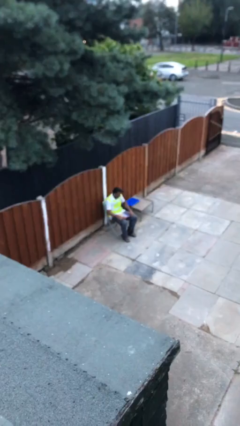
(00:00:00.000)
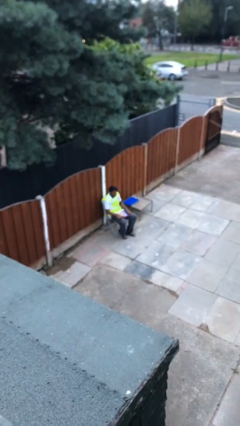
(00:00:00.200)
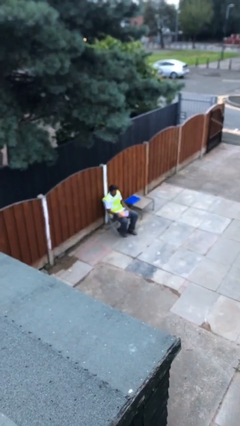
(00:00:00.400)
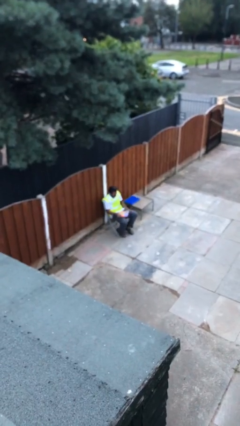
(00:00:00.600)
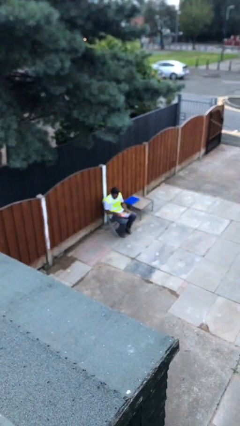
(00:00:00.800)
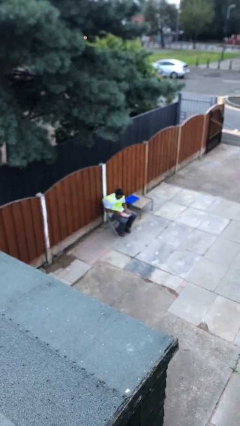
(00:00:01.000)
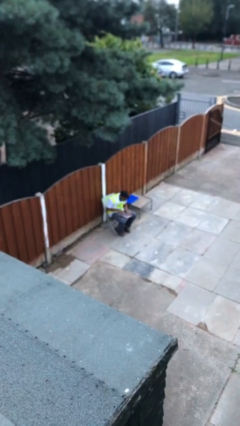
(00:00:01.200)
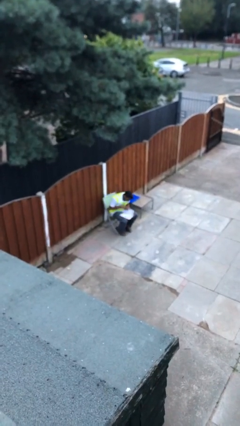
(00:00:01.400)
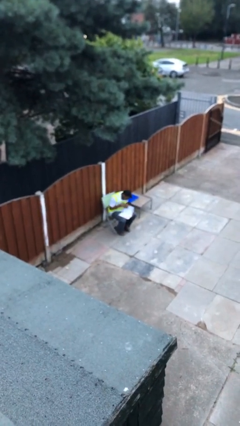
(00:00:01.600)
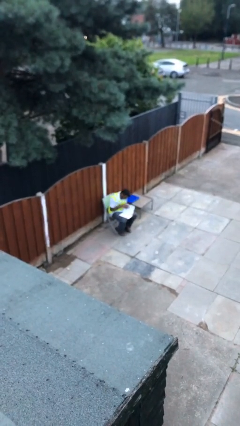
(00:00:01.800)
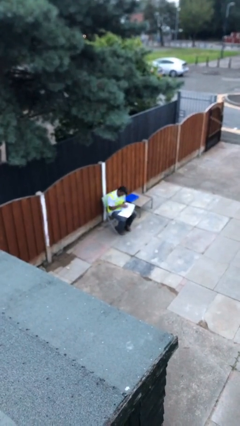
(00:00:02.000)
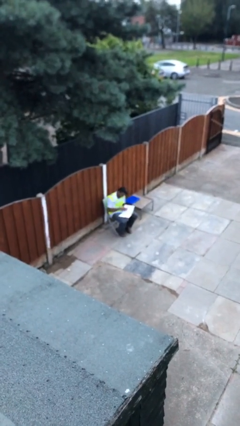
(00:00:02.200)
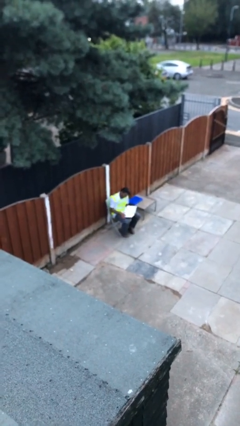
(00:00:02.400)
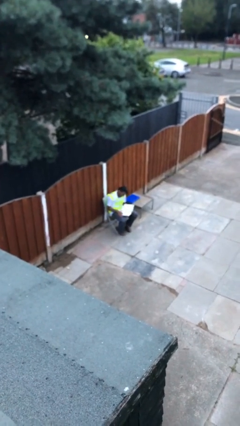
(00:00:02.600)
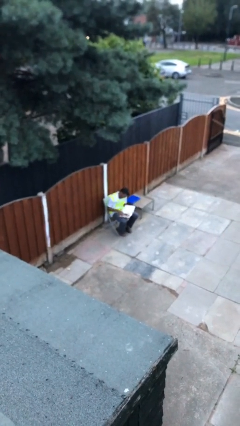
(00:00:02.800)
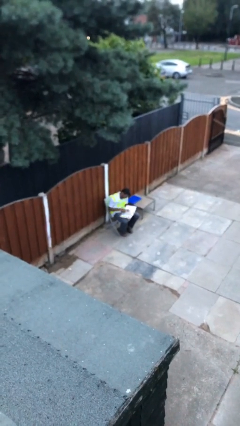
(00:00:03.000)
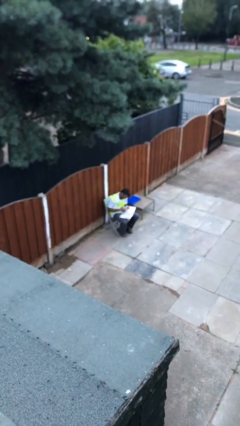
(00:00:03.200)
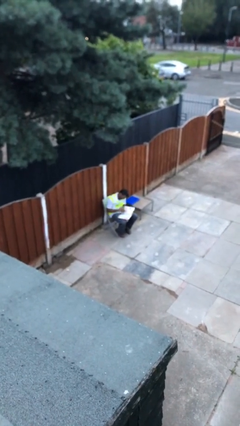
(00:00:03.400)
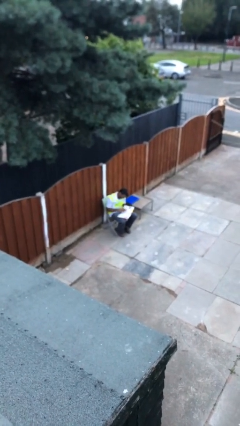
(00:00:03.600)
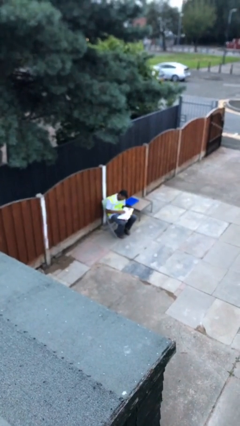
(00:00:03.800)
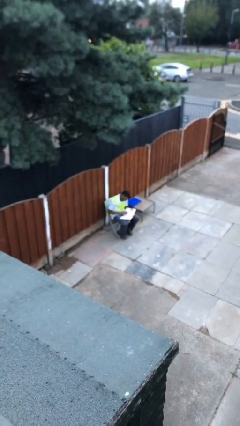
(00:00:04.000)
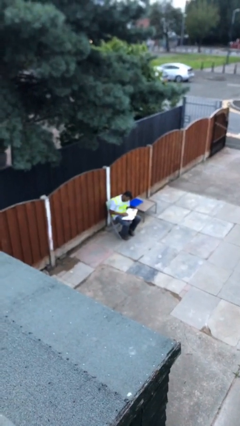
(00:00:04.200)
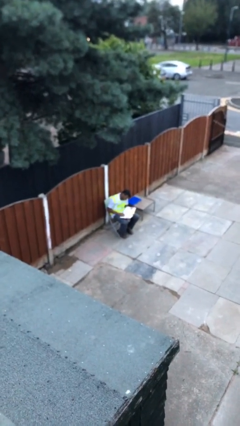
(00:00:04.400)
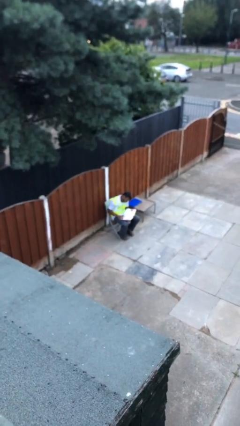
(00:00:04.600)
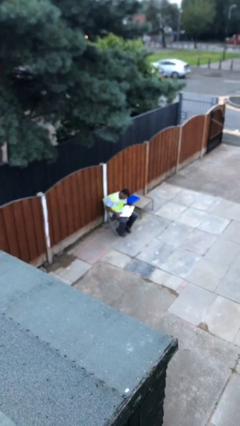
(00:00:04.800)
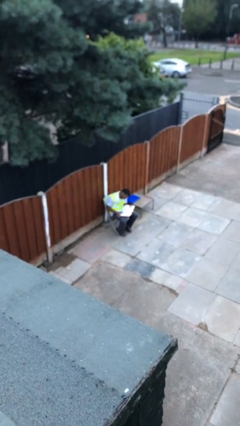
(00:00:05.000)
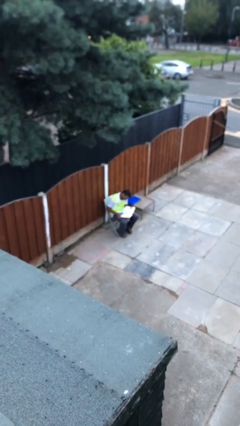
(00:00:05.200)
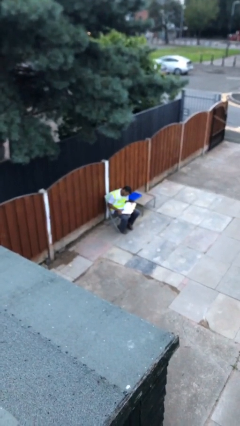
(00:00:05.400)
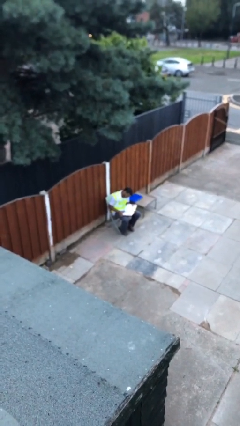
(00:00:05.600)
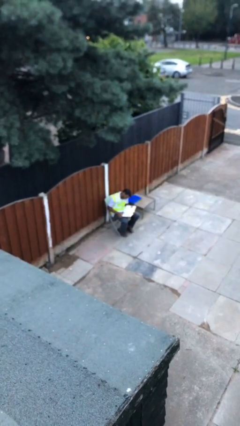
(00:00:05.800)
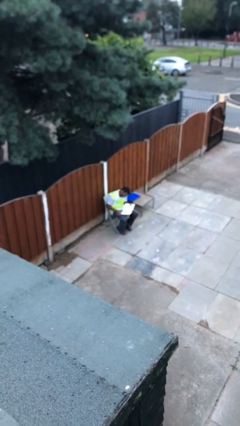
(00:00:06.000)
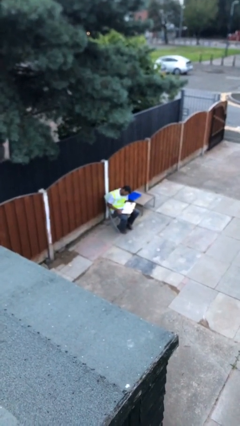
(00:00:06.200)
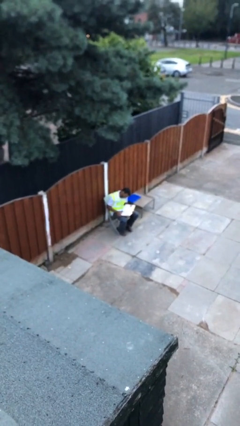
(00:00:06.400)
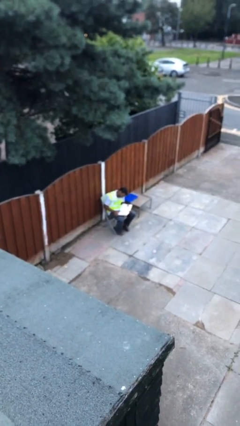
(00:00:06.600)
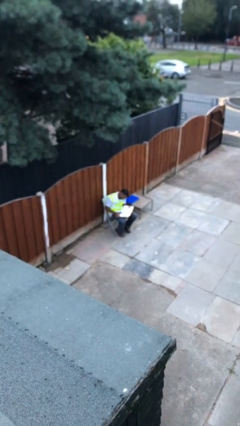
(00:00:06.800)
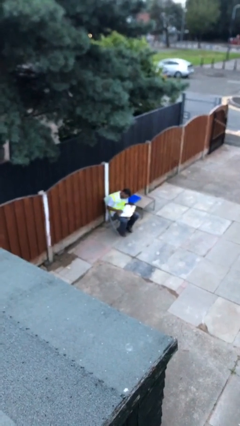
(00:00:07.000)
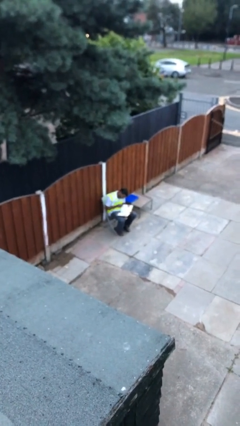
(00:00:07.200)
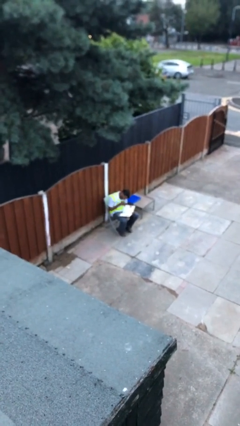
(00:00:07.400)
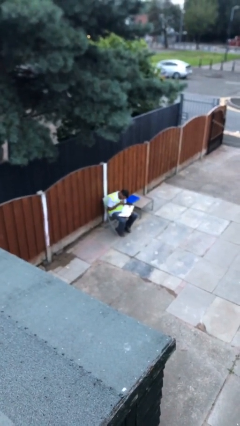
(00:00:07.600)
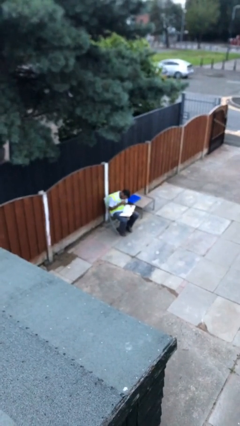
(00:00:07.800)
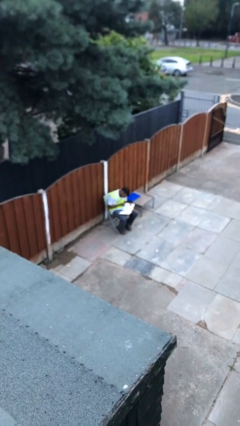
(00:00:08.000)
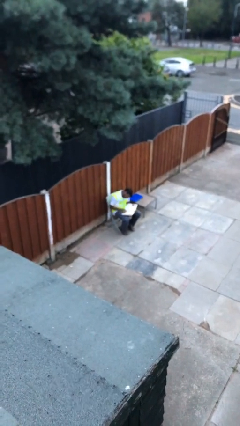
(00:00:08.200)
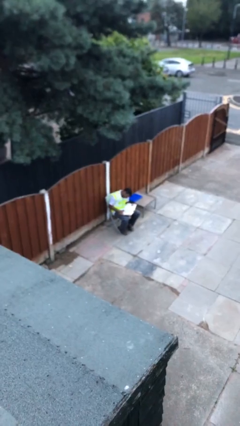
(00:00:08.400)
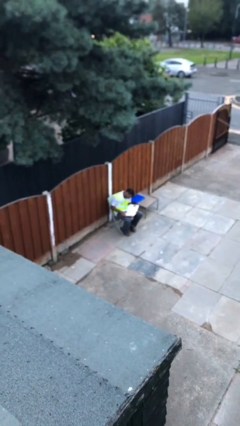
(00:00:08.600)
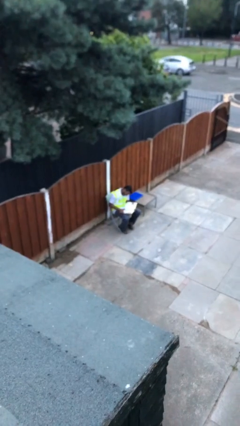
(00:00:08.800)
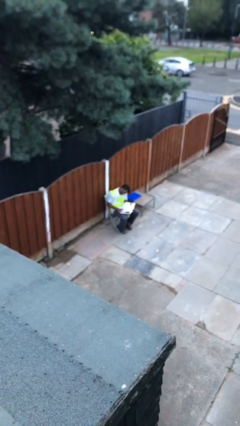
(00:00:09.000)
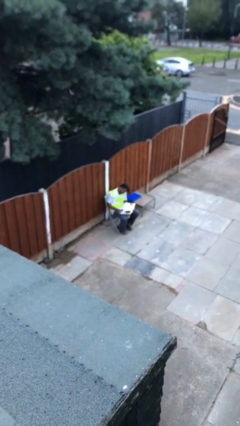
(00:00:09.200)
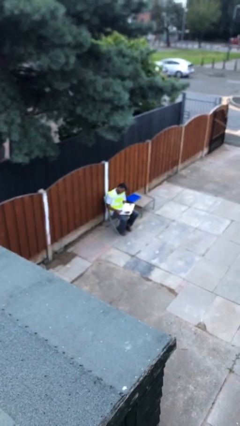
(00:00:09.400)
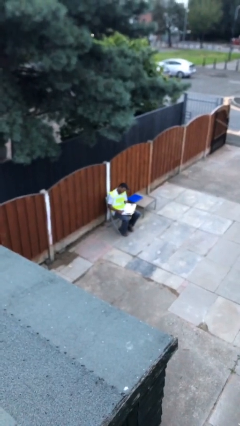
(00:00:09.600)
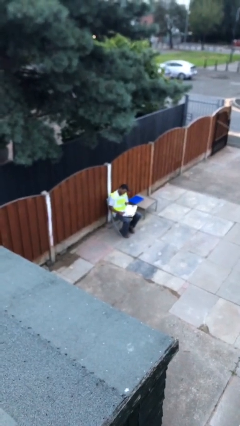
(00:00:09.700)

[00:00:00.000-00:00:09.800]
person reads document

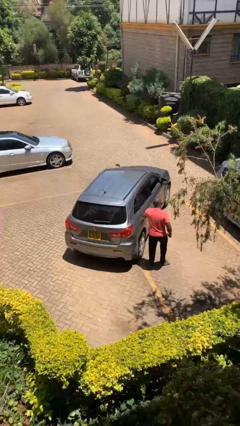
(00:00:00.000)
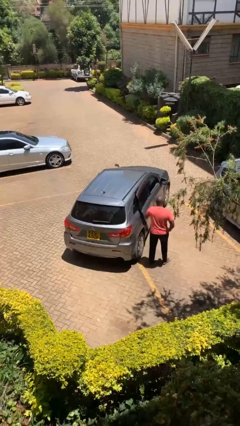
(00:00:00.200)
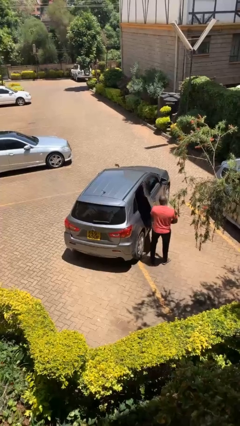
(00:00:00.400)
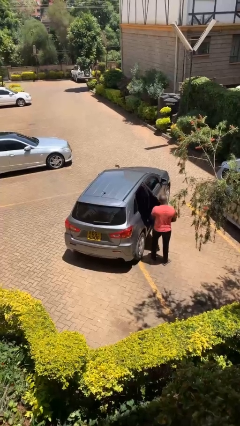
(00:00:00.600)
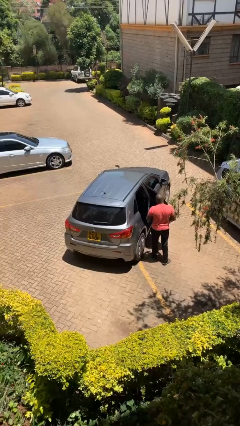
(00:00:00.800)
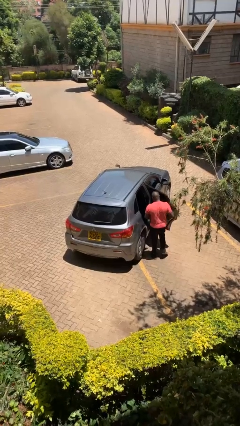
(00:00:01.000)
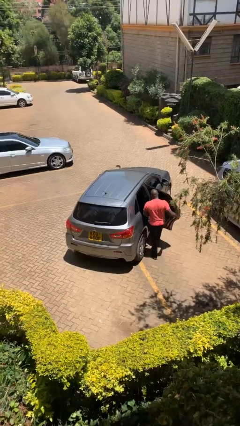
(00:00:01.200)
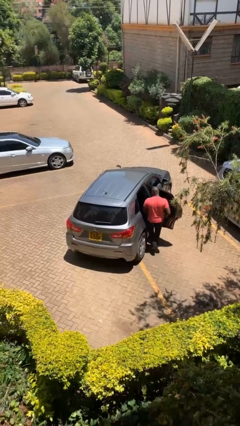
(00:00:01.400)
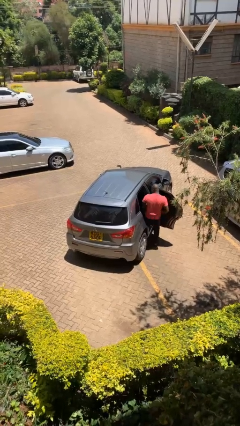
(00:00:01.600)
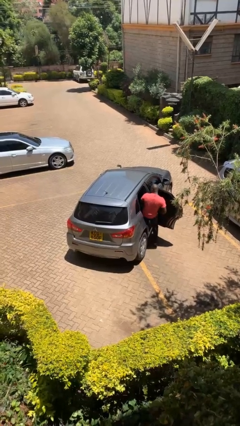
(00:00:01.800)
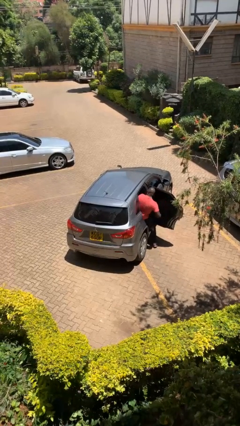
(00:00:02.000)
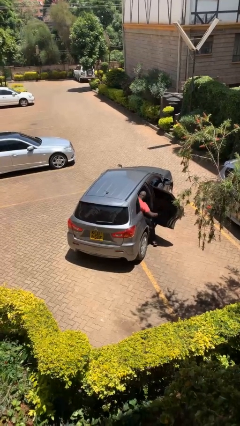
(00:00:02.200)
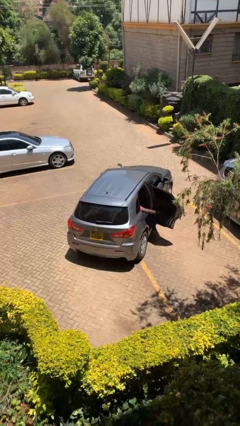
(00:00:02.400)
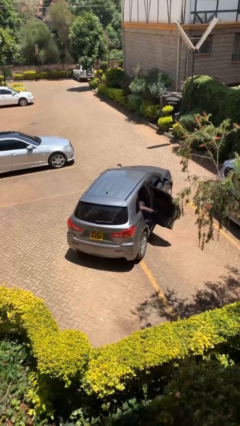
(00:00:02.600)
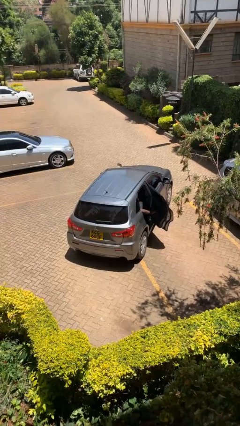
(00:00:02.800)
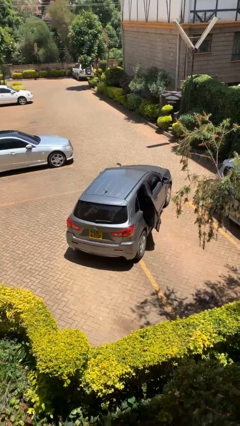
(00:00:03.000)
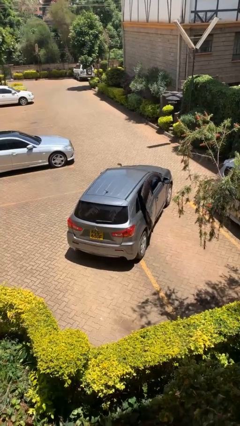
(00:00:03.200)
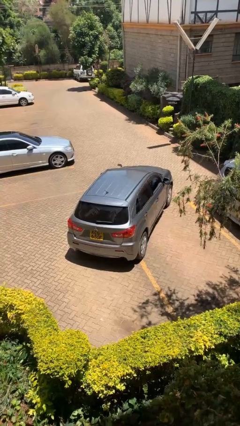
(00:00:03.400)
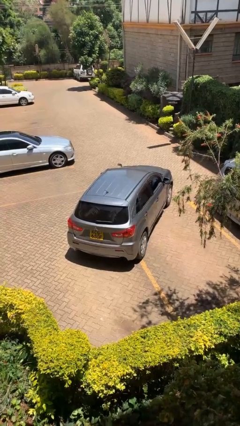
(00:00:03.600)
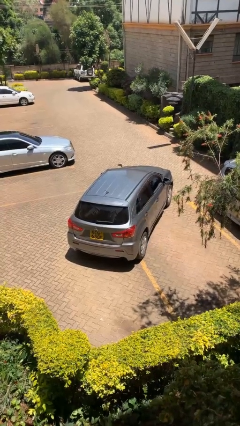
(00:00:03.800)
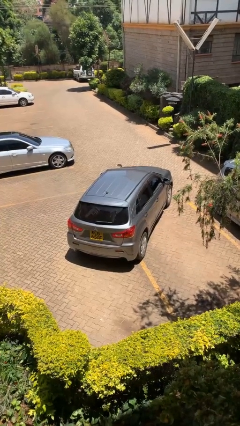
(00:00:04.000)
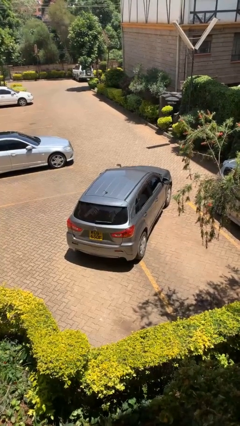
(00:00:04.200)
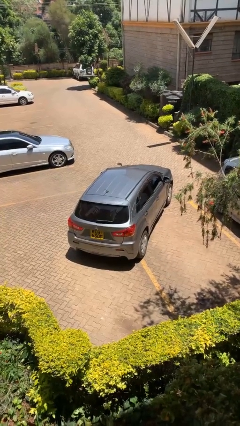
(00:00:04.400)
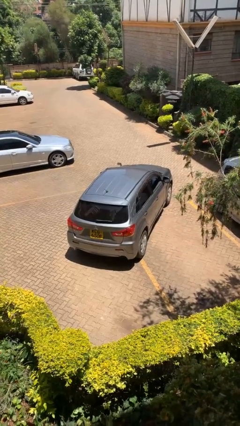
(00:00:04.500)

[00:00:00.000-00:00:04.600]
car picks up person

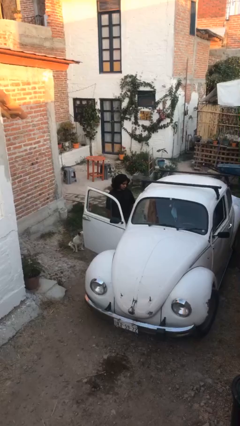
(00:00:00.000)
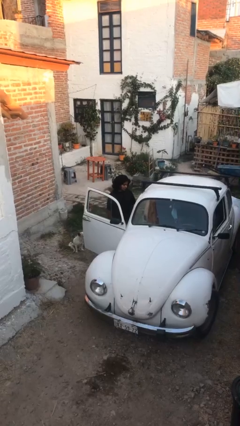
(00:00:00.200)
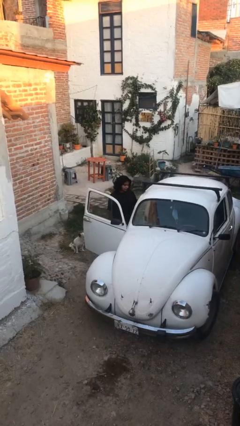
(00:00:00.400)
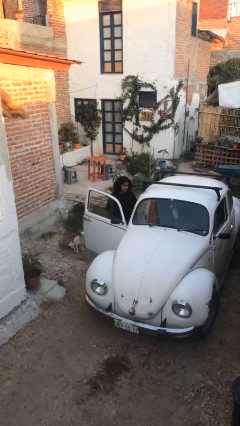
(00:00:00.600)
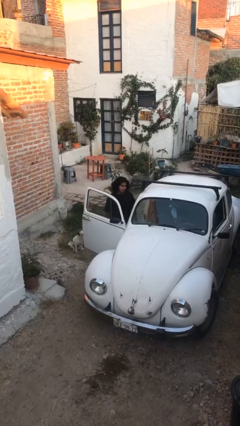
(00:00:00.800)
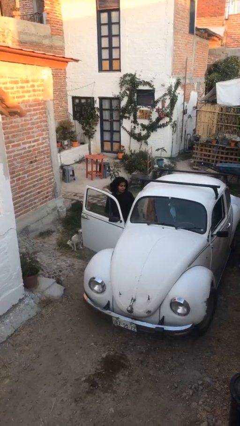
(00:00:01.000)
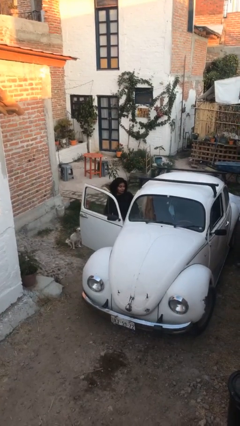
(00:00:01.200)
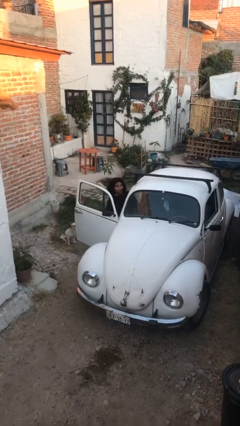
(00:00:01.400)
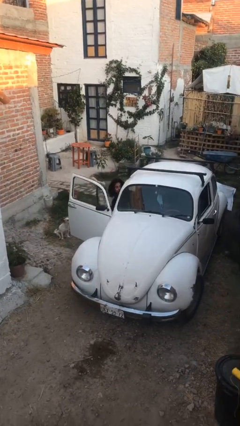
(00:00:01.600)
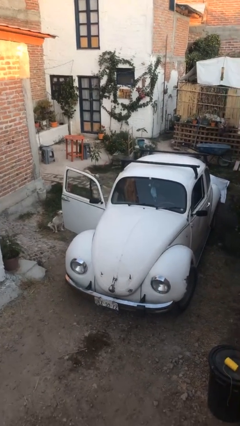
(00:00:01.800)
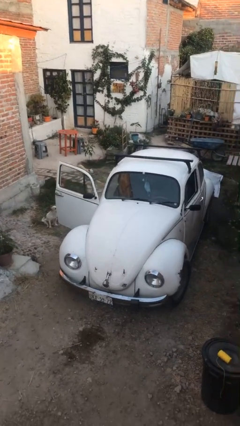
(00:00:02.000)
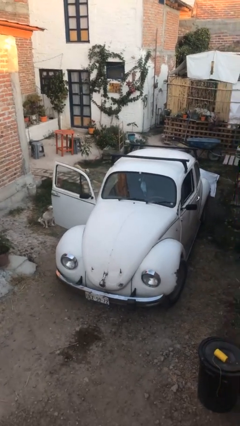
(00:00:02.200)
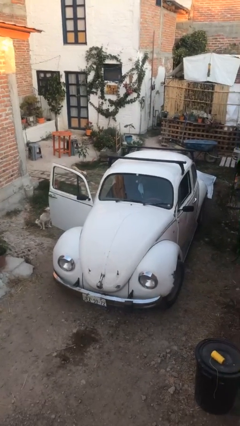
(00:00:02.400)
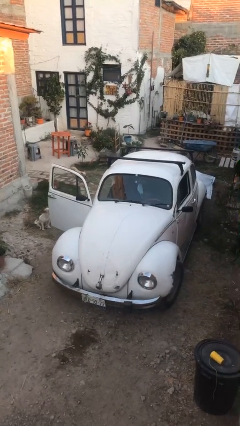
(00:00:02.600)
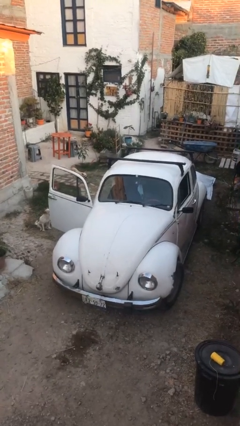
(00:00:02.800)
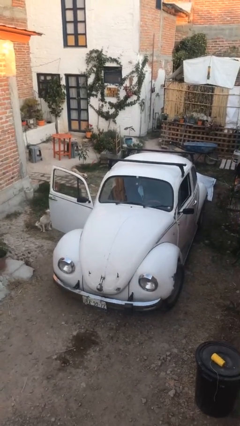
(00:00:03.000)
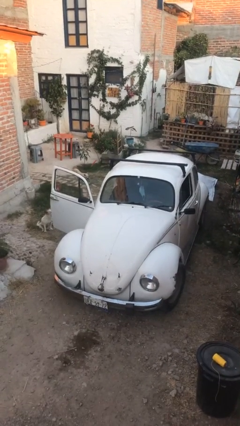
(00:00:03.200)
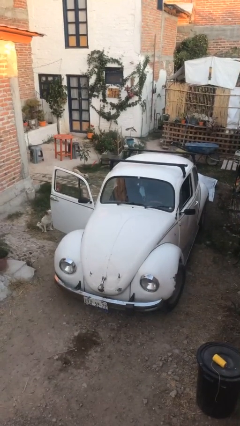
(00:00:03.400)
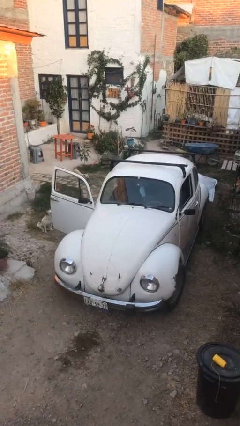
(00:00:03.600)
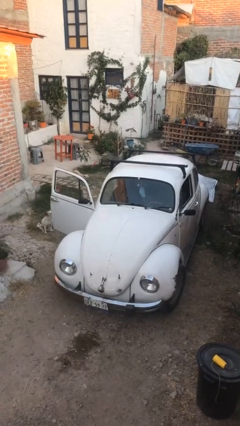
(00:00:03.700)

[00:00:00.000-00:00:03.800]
person enters car
